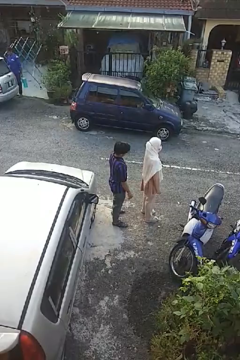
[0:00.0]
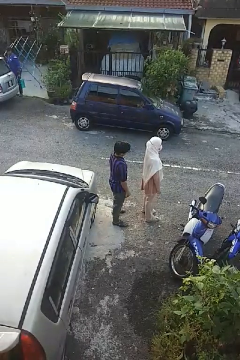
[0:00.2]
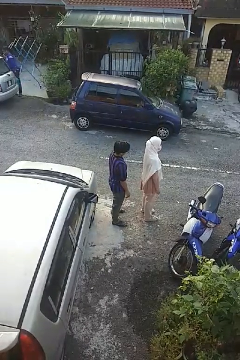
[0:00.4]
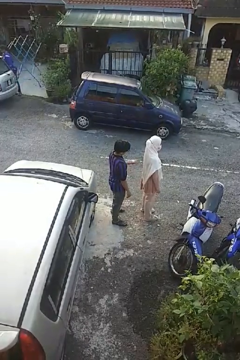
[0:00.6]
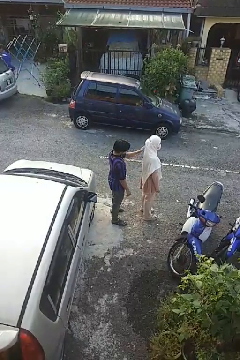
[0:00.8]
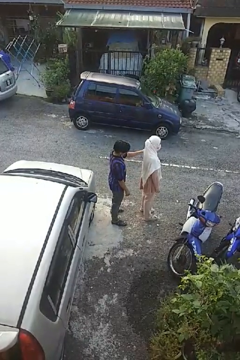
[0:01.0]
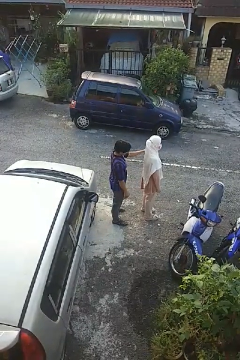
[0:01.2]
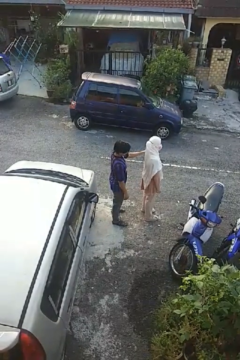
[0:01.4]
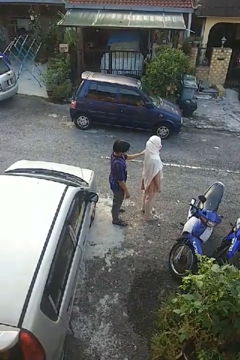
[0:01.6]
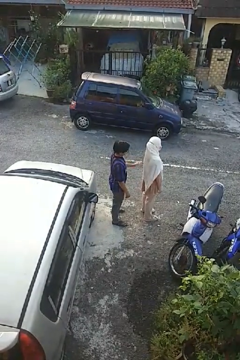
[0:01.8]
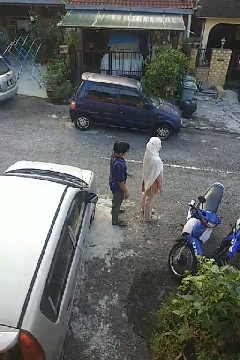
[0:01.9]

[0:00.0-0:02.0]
person touches back of person

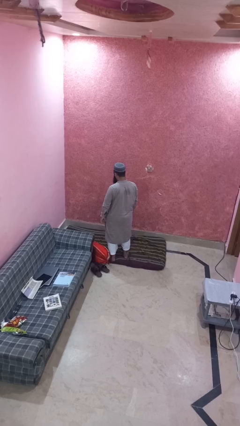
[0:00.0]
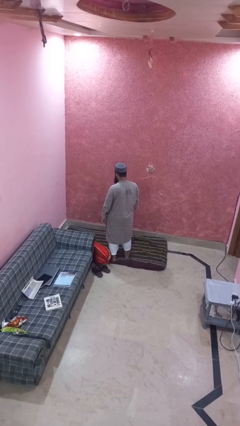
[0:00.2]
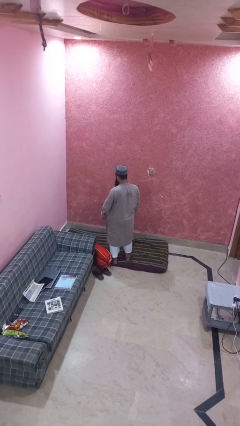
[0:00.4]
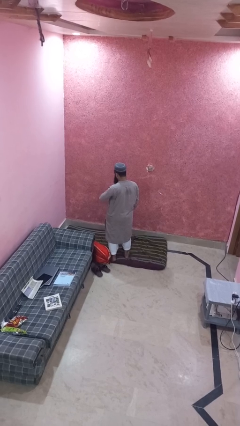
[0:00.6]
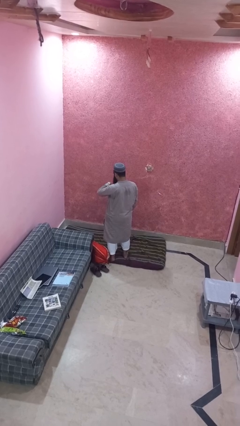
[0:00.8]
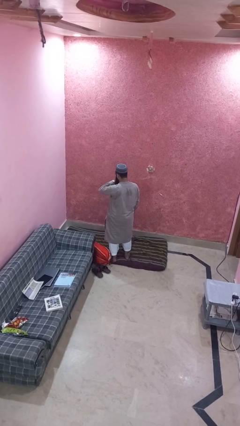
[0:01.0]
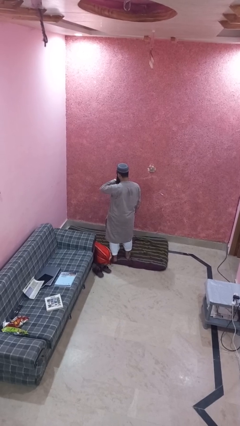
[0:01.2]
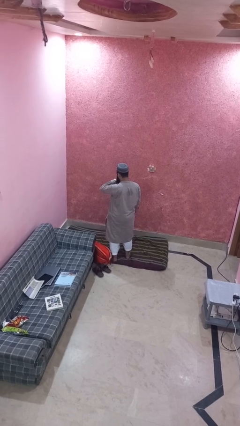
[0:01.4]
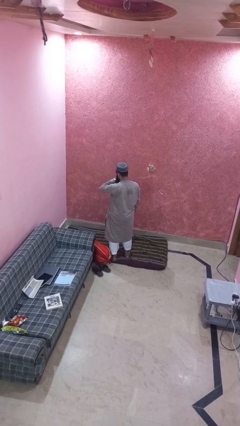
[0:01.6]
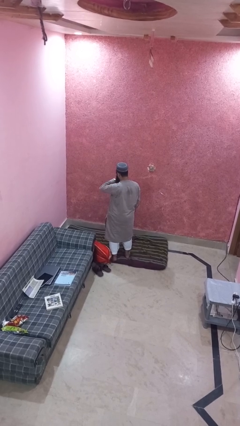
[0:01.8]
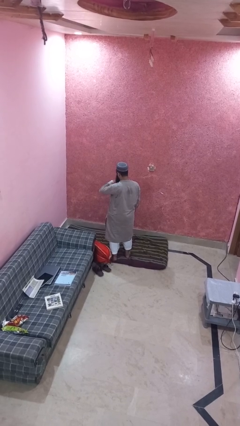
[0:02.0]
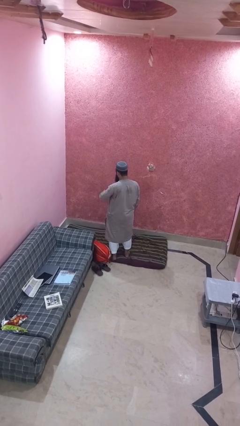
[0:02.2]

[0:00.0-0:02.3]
person looks at wristwatch

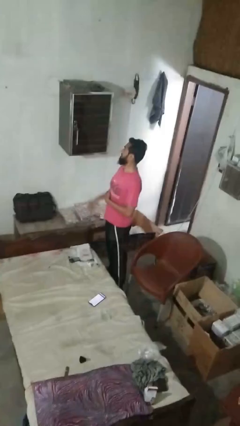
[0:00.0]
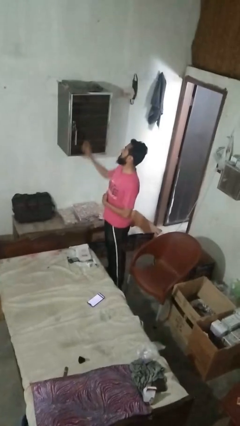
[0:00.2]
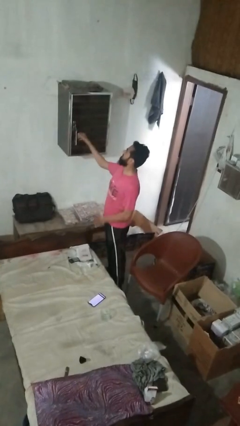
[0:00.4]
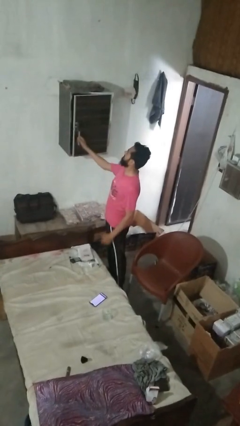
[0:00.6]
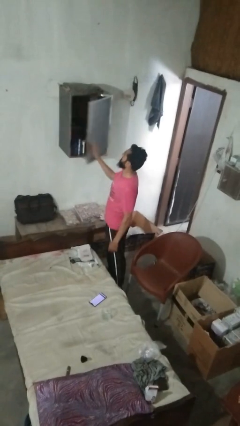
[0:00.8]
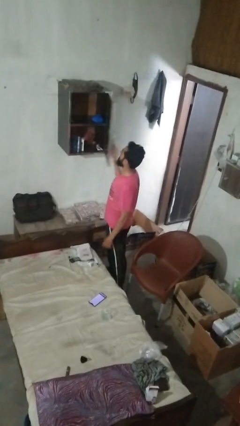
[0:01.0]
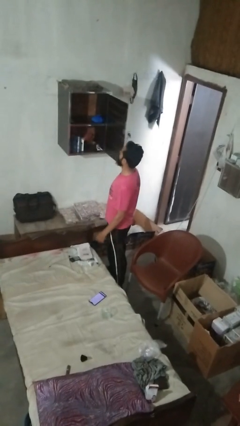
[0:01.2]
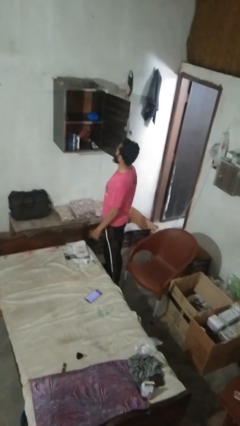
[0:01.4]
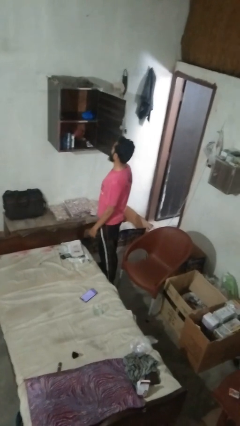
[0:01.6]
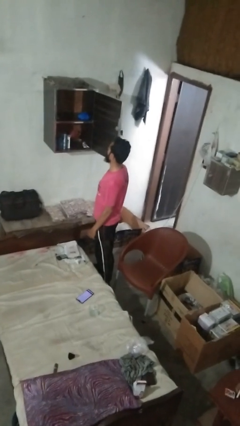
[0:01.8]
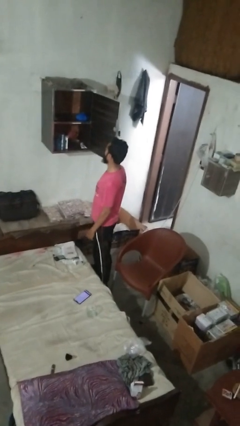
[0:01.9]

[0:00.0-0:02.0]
person opens closet door

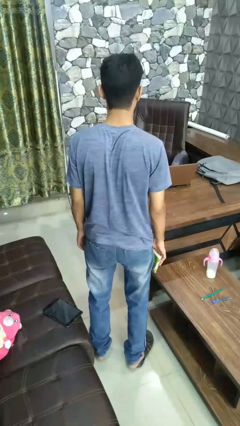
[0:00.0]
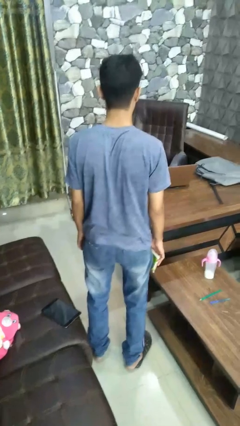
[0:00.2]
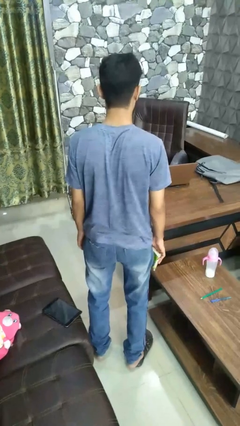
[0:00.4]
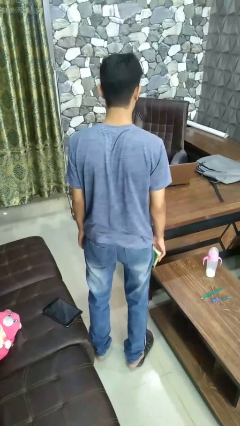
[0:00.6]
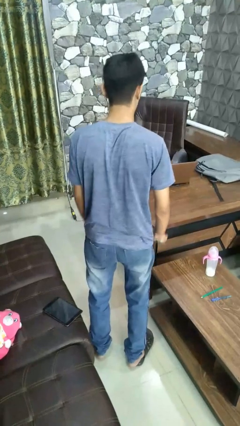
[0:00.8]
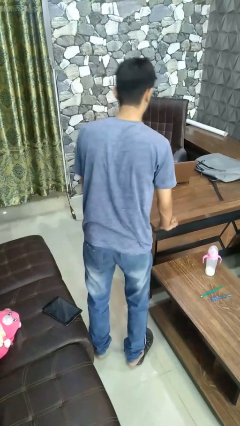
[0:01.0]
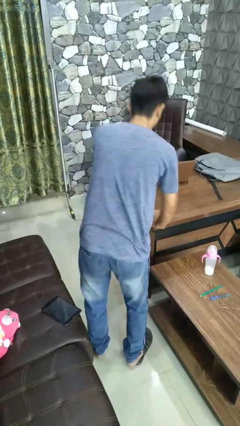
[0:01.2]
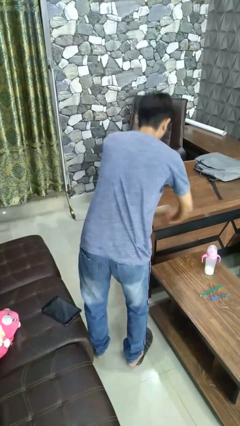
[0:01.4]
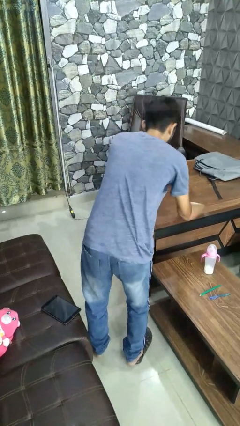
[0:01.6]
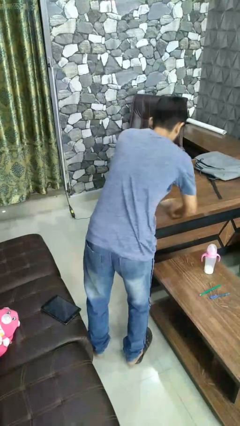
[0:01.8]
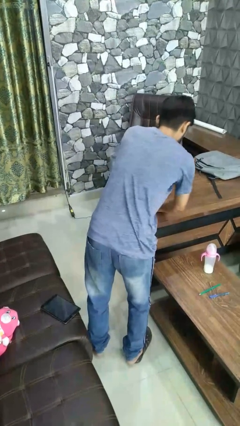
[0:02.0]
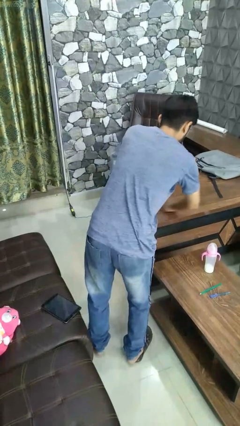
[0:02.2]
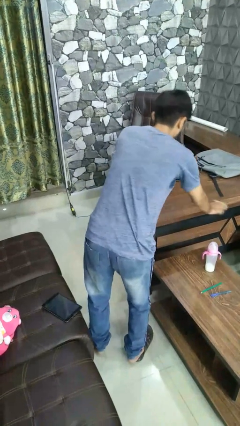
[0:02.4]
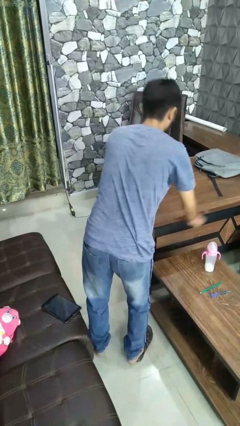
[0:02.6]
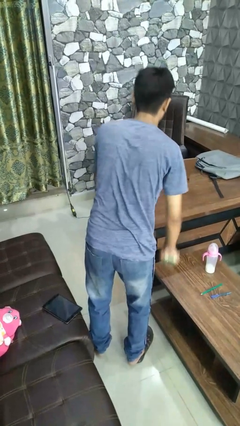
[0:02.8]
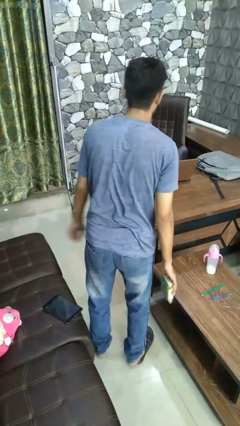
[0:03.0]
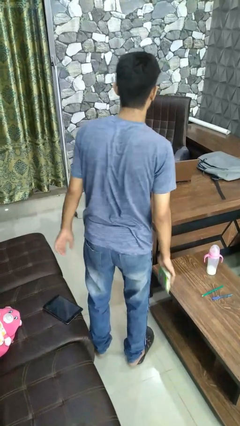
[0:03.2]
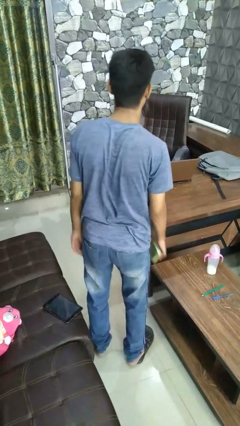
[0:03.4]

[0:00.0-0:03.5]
person dusts furniture

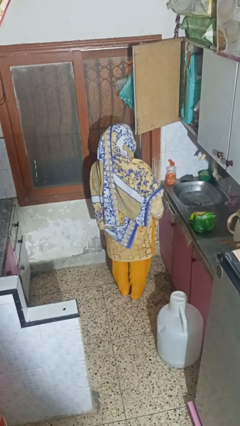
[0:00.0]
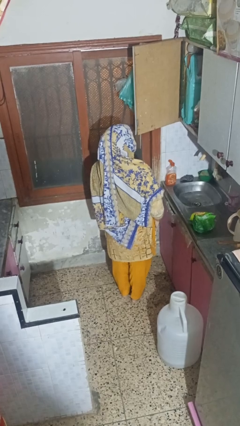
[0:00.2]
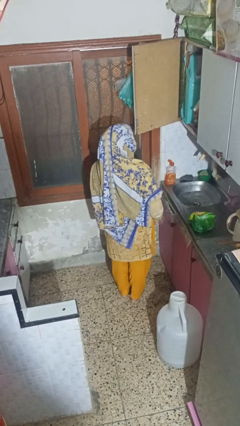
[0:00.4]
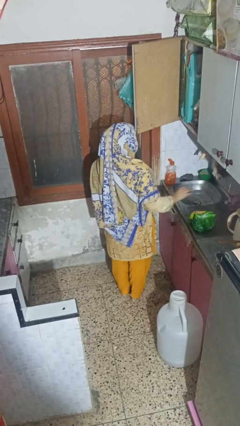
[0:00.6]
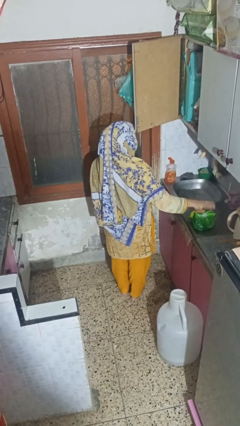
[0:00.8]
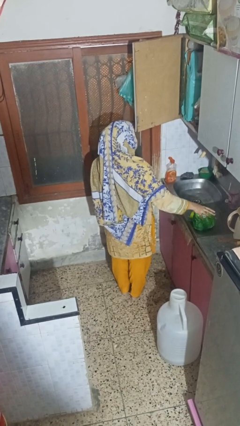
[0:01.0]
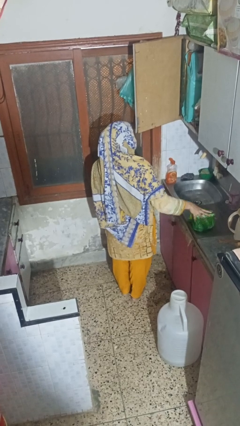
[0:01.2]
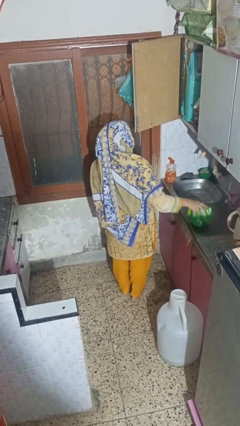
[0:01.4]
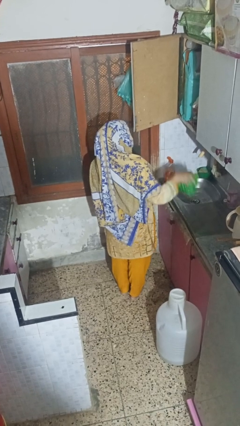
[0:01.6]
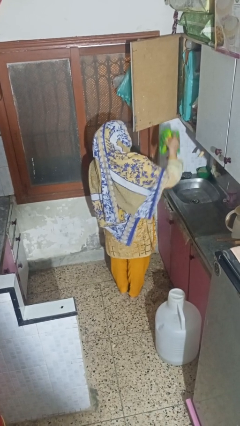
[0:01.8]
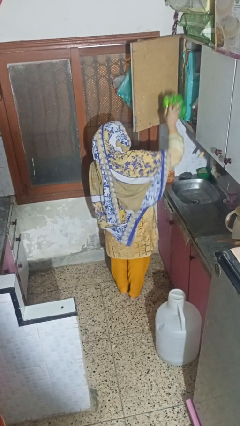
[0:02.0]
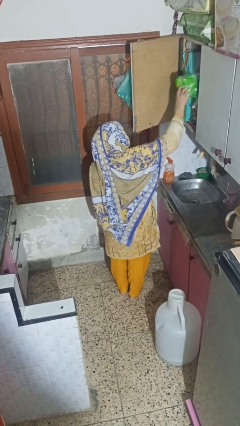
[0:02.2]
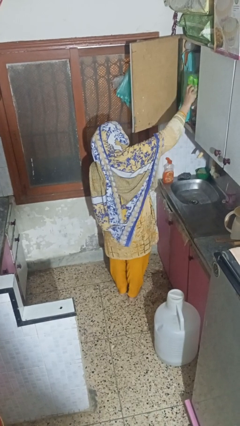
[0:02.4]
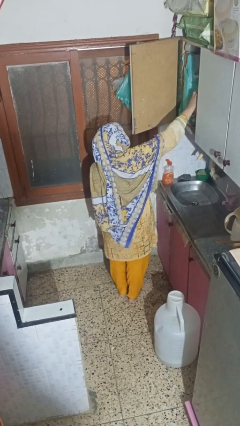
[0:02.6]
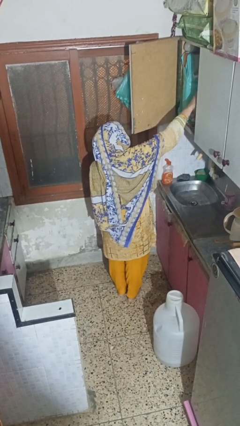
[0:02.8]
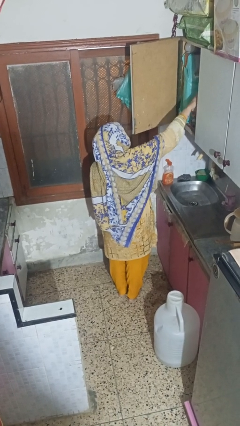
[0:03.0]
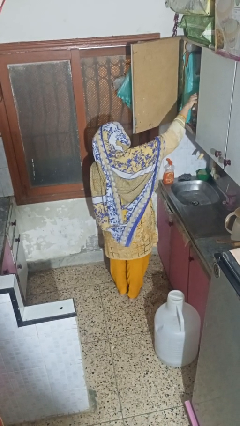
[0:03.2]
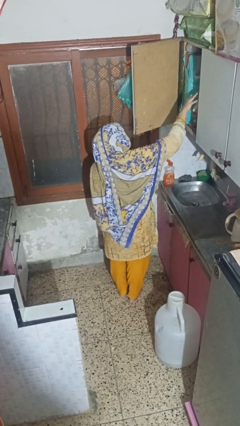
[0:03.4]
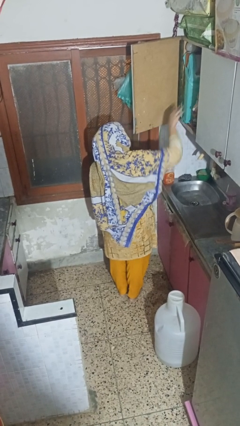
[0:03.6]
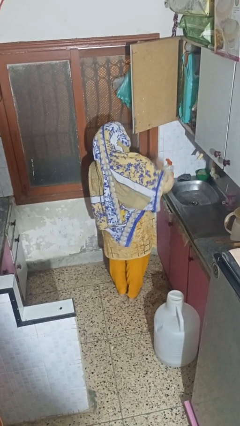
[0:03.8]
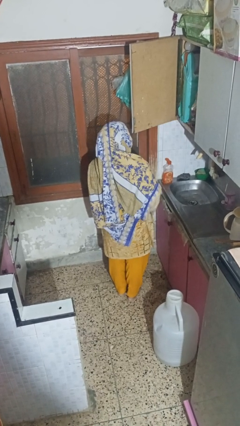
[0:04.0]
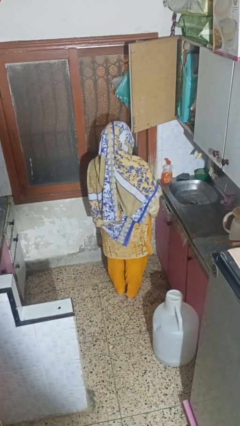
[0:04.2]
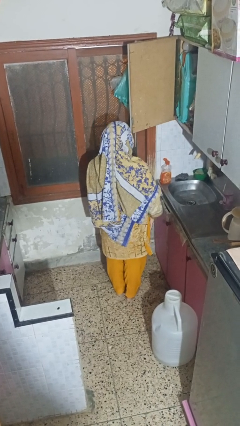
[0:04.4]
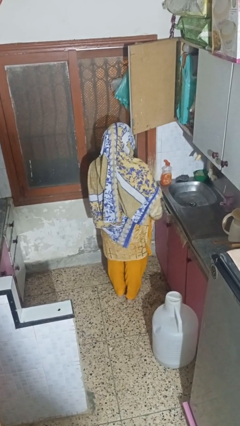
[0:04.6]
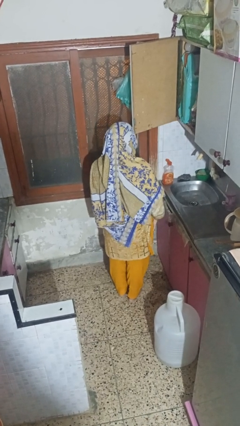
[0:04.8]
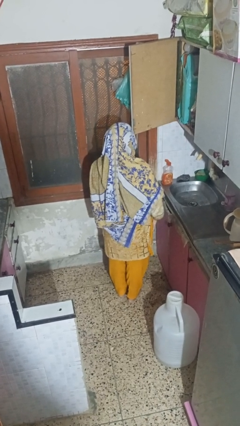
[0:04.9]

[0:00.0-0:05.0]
person puts object in cabinet

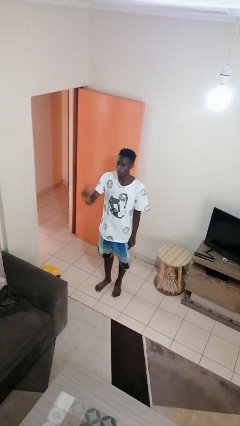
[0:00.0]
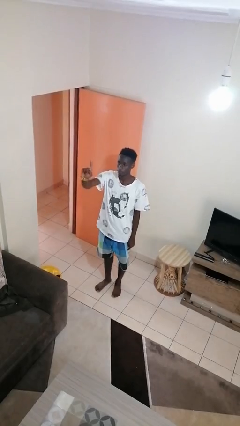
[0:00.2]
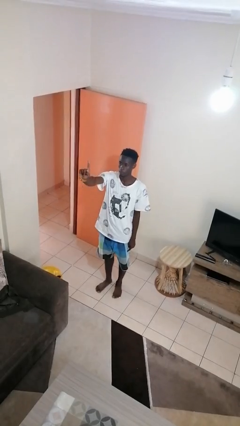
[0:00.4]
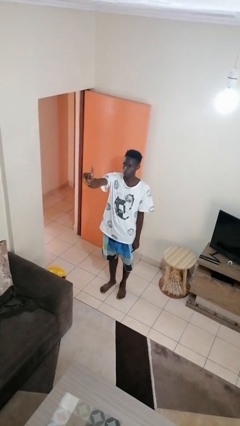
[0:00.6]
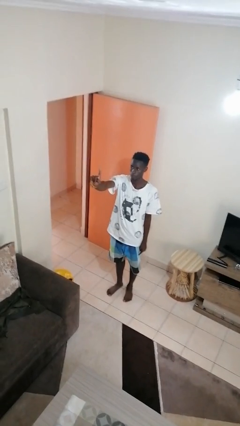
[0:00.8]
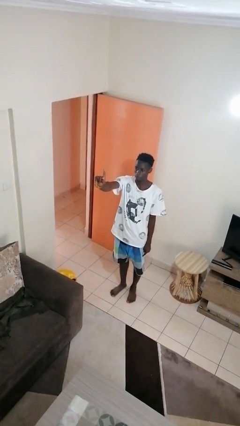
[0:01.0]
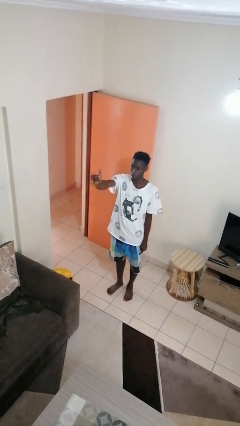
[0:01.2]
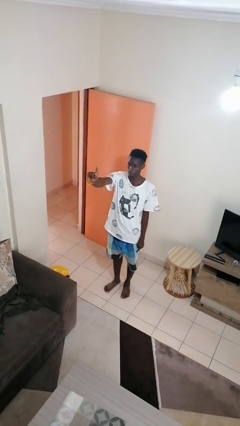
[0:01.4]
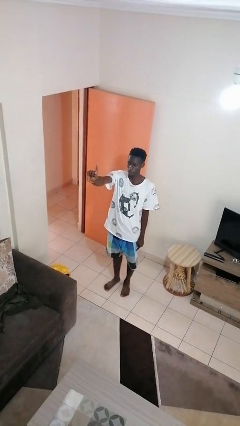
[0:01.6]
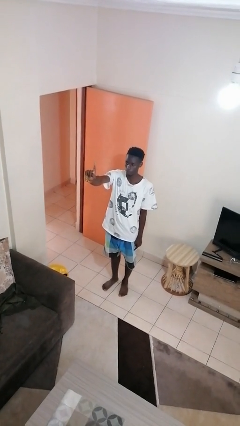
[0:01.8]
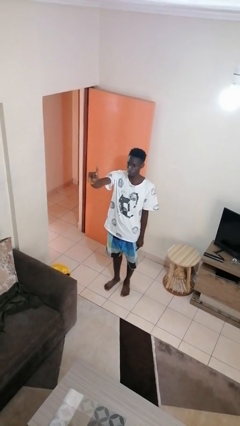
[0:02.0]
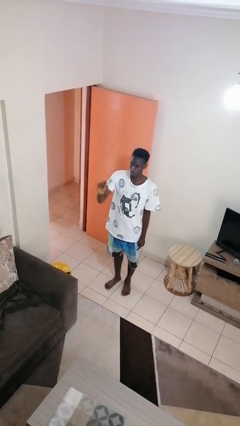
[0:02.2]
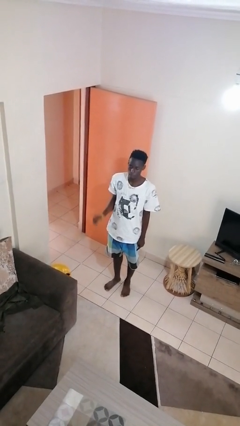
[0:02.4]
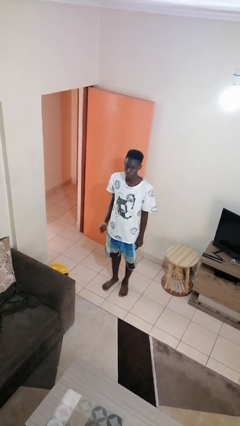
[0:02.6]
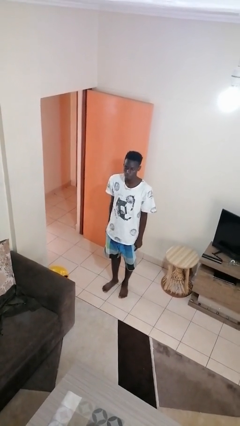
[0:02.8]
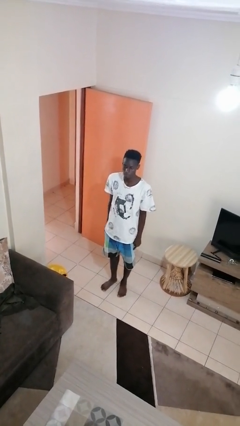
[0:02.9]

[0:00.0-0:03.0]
person gestures number one
